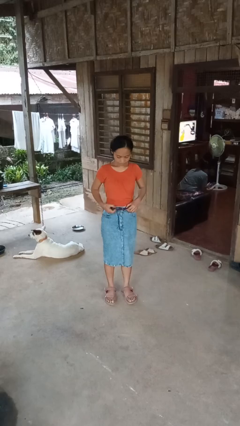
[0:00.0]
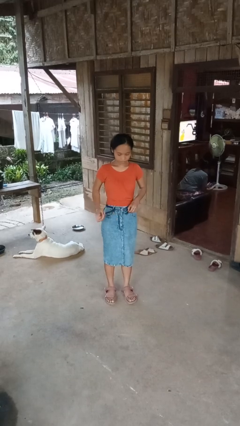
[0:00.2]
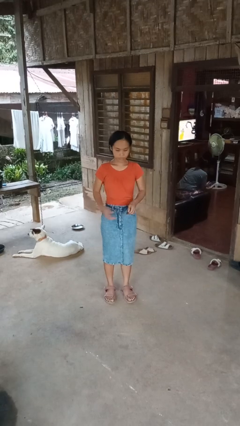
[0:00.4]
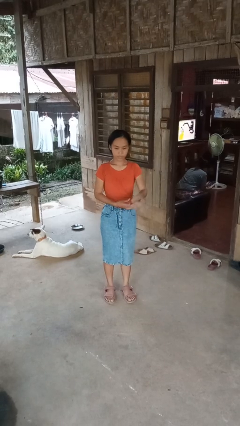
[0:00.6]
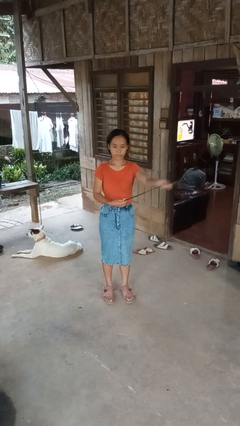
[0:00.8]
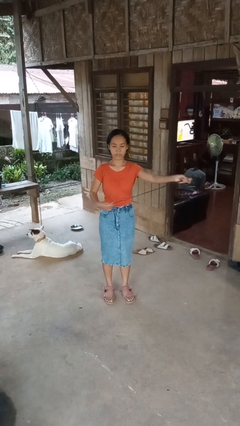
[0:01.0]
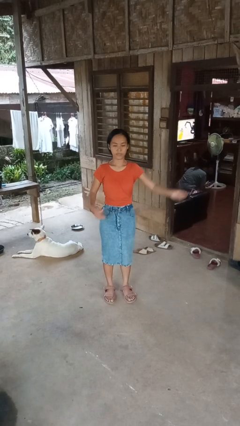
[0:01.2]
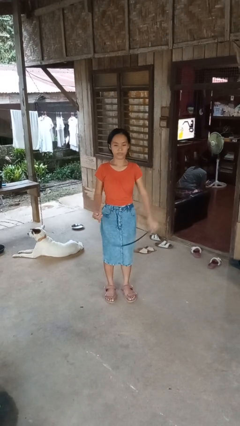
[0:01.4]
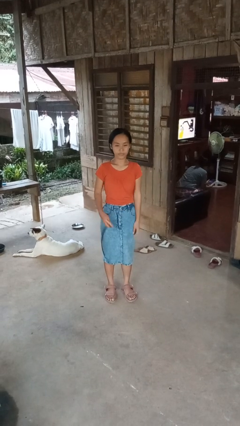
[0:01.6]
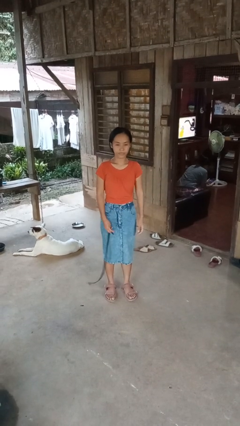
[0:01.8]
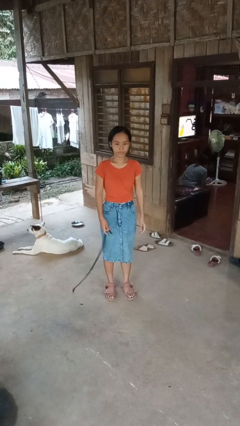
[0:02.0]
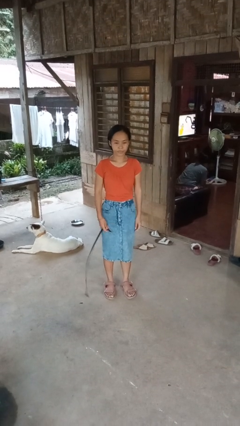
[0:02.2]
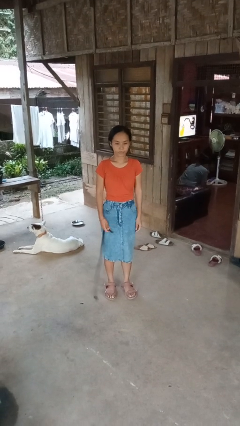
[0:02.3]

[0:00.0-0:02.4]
person takes off belt

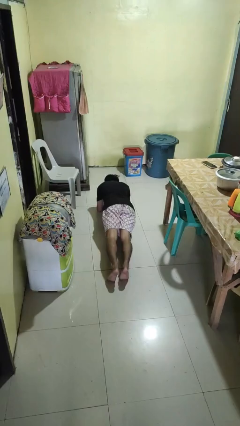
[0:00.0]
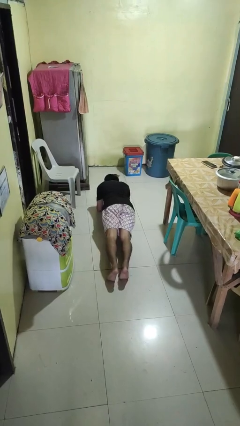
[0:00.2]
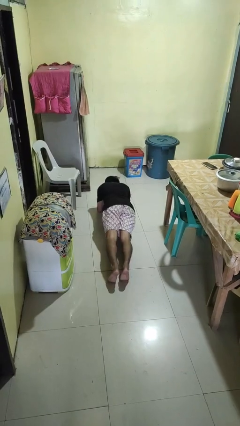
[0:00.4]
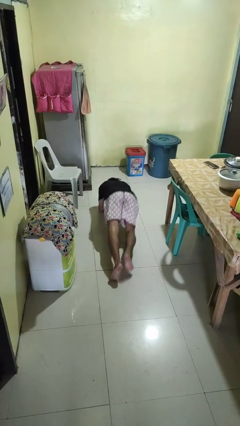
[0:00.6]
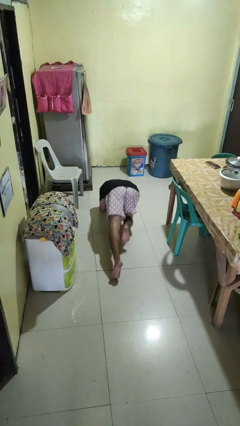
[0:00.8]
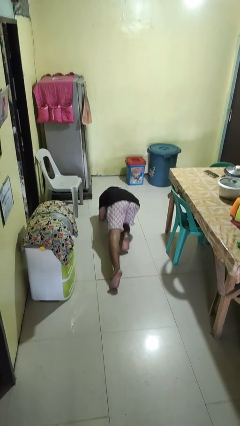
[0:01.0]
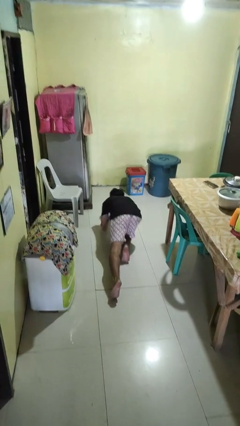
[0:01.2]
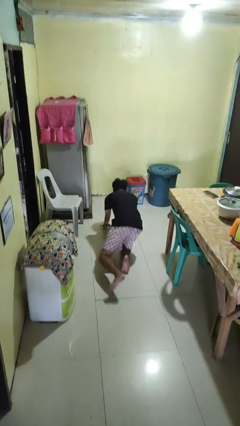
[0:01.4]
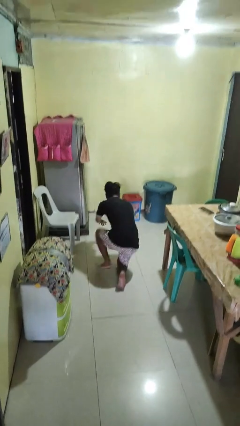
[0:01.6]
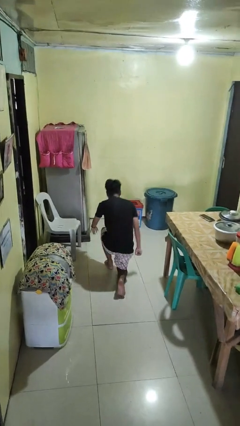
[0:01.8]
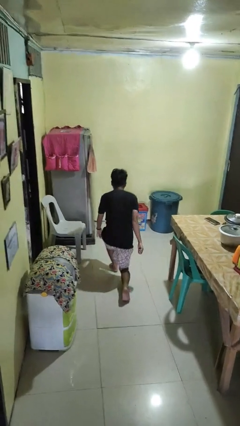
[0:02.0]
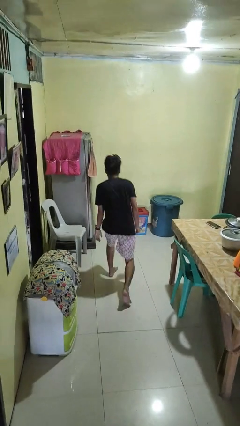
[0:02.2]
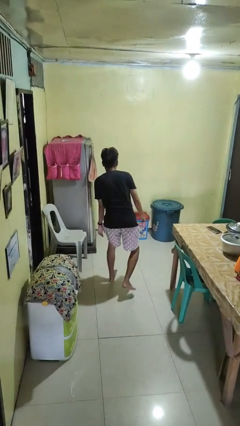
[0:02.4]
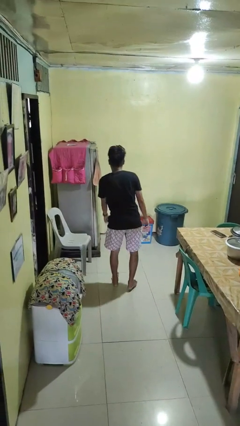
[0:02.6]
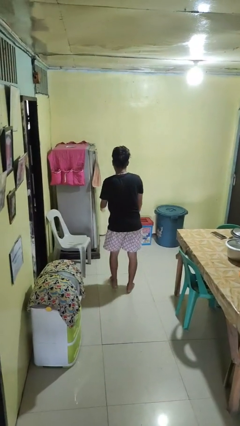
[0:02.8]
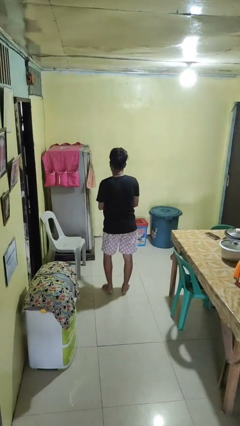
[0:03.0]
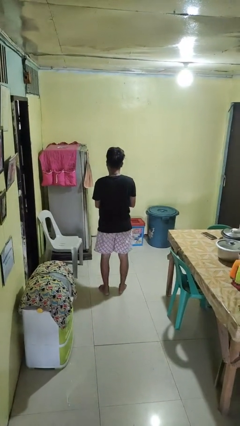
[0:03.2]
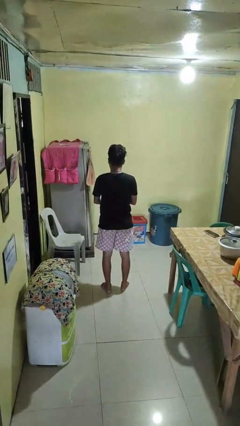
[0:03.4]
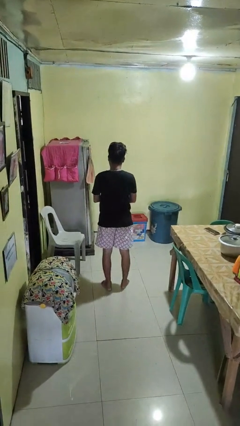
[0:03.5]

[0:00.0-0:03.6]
person stands up from floor

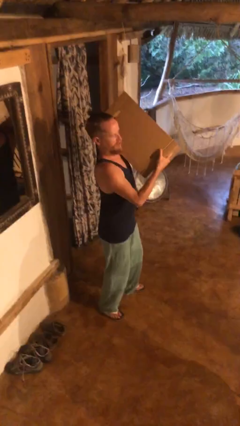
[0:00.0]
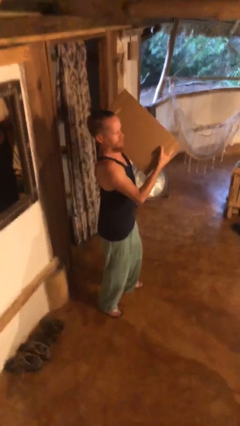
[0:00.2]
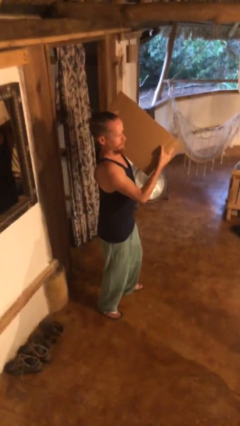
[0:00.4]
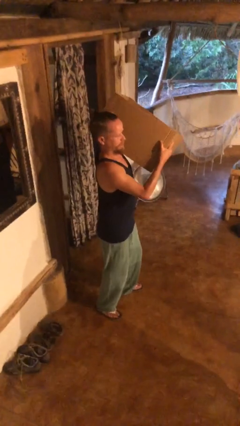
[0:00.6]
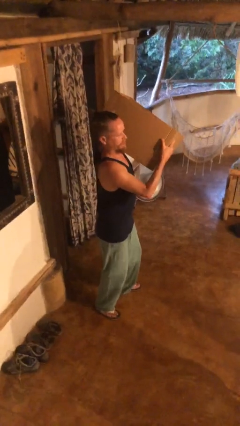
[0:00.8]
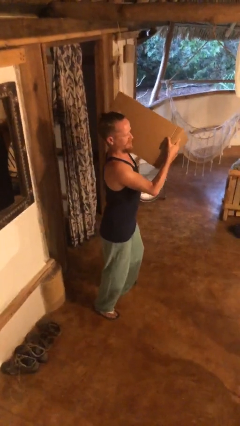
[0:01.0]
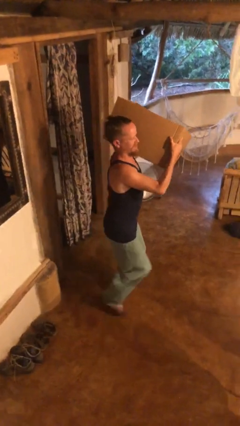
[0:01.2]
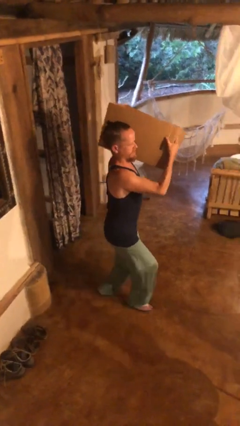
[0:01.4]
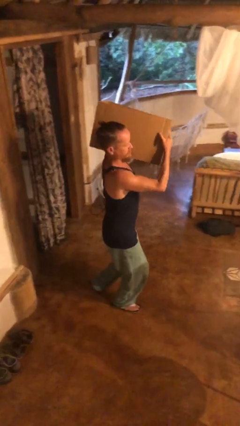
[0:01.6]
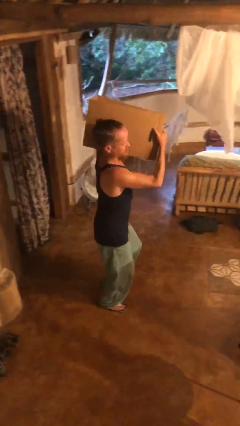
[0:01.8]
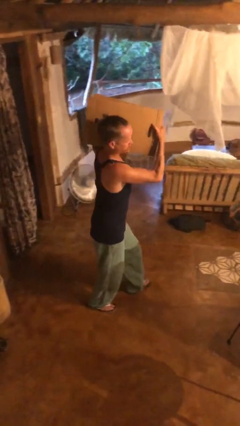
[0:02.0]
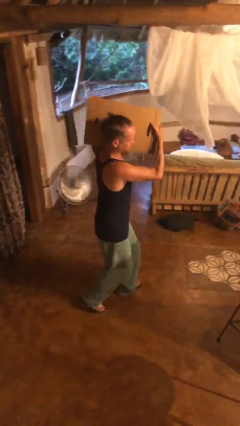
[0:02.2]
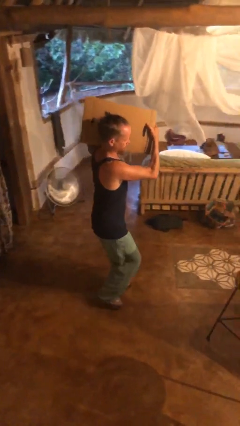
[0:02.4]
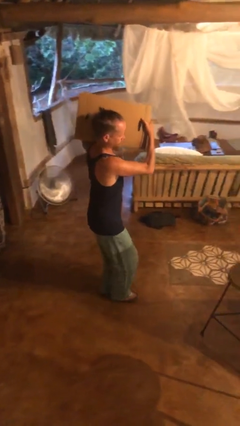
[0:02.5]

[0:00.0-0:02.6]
person carries heavy object

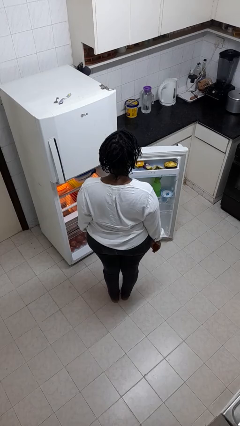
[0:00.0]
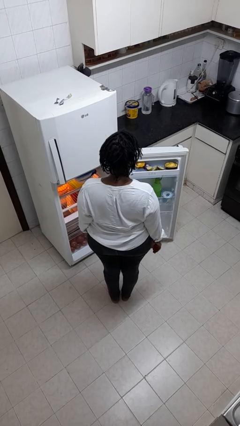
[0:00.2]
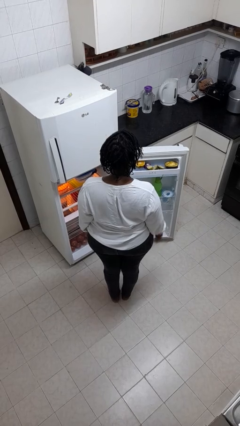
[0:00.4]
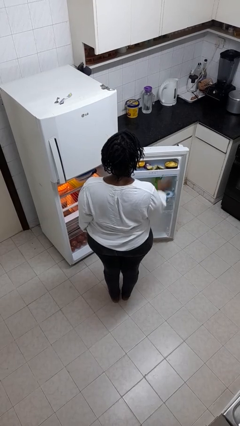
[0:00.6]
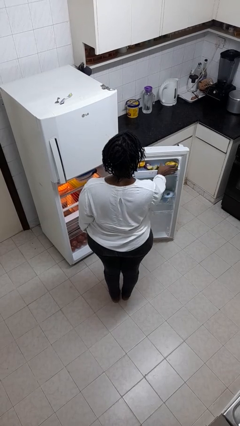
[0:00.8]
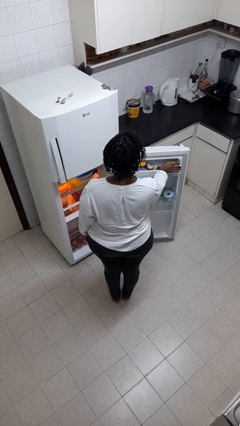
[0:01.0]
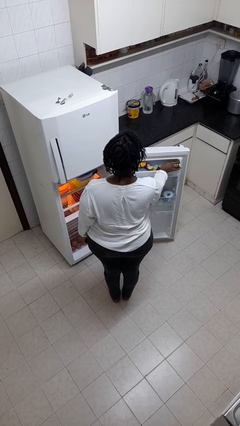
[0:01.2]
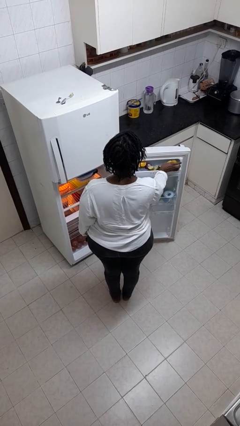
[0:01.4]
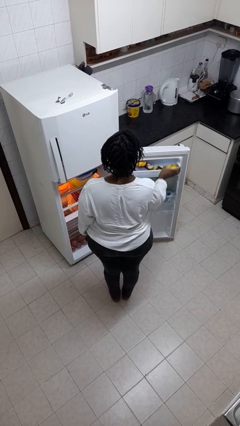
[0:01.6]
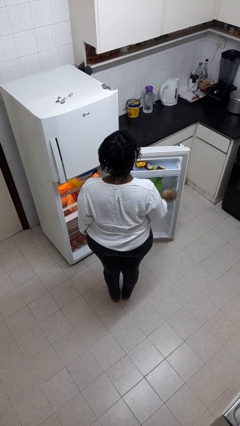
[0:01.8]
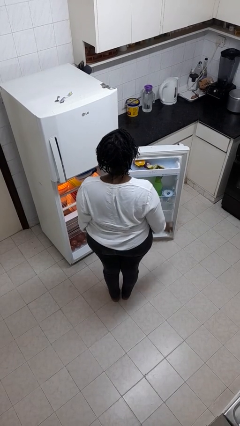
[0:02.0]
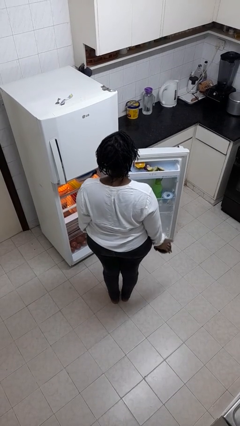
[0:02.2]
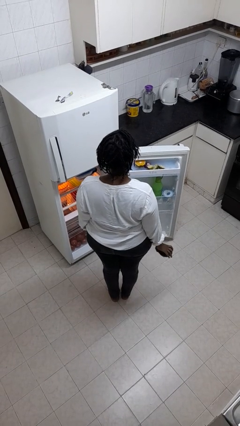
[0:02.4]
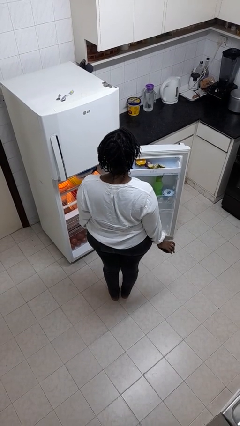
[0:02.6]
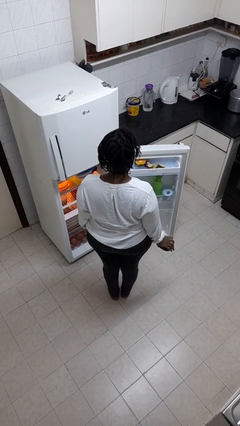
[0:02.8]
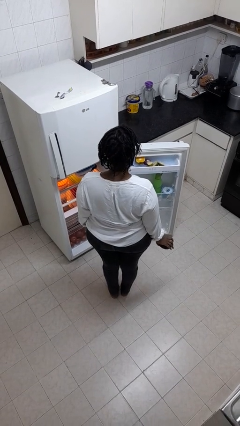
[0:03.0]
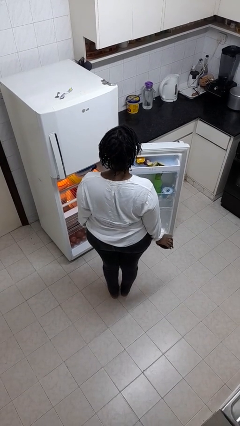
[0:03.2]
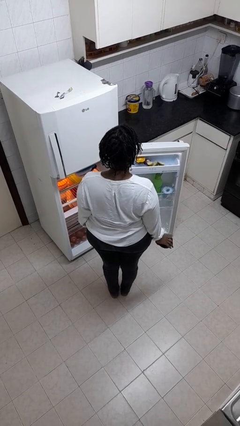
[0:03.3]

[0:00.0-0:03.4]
person takes object from refrigerator

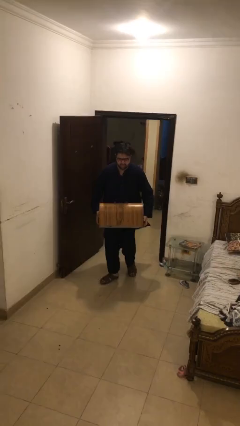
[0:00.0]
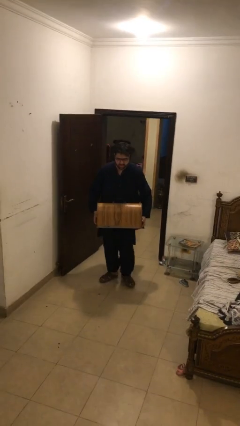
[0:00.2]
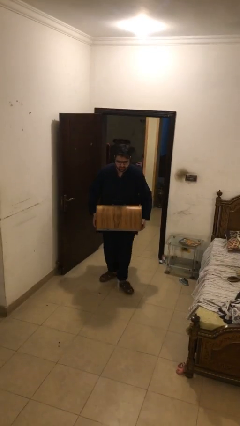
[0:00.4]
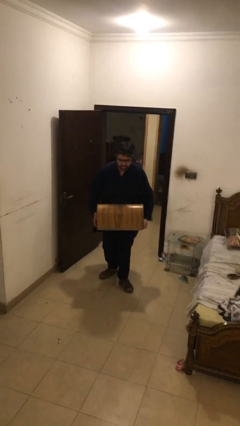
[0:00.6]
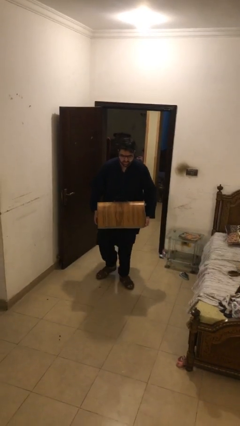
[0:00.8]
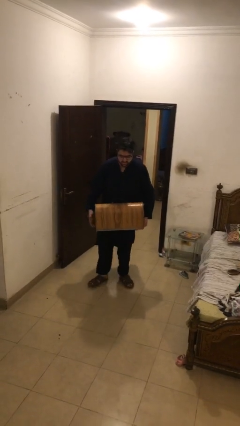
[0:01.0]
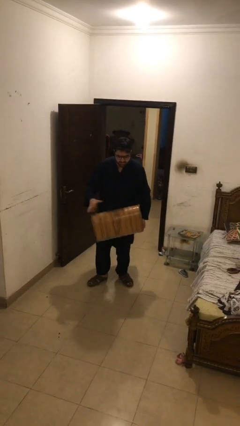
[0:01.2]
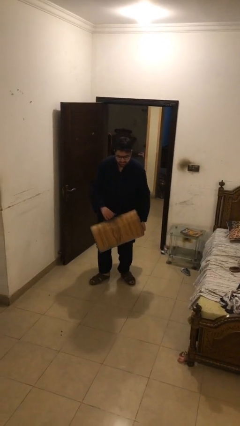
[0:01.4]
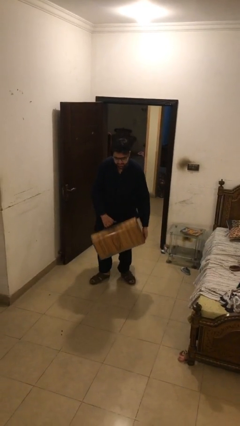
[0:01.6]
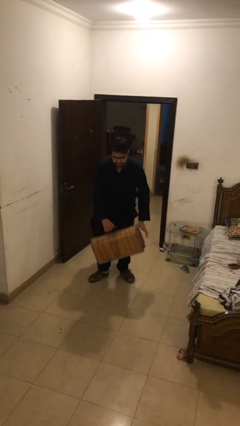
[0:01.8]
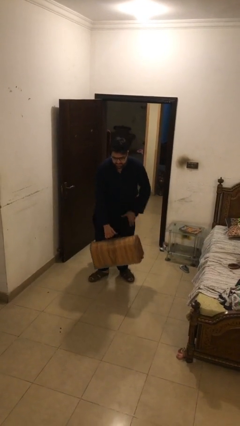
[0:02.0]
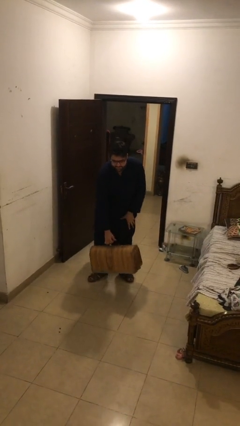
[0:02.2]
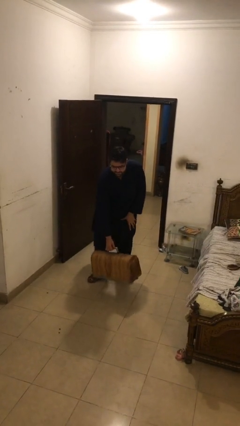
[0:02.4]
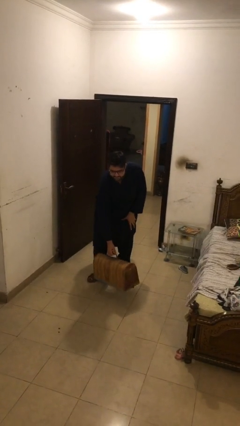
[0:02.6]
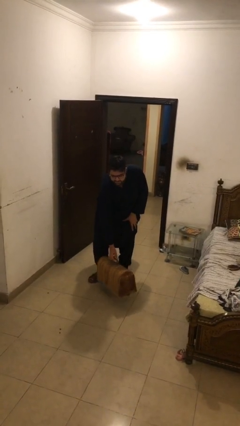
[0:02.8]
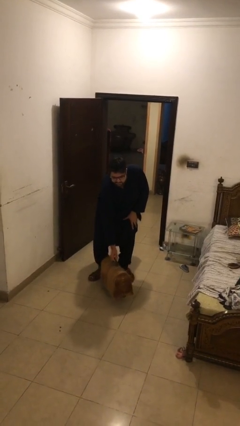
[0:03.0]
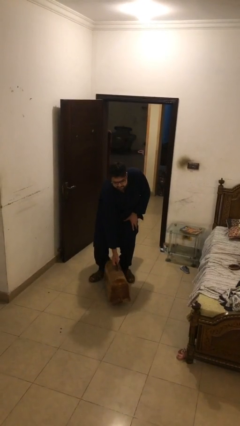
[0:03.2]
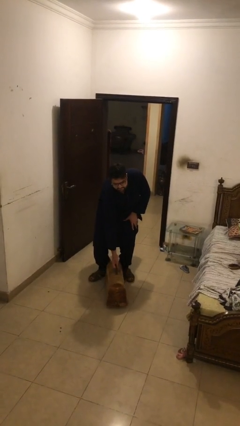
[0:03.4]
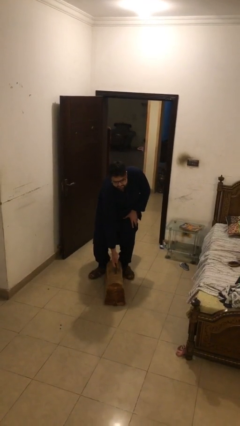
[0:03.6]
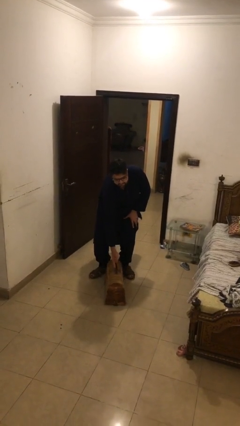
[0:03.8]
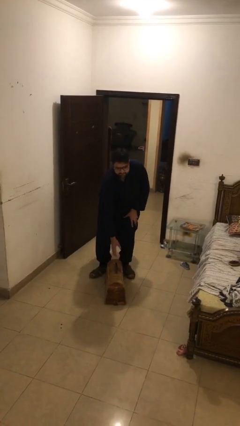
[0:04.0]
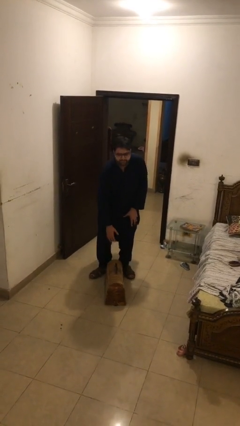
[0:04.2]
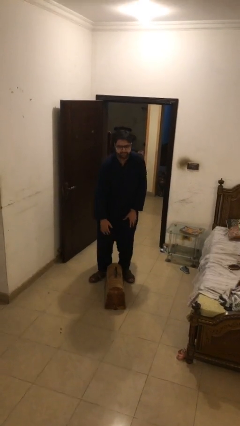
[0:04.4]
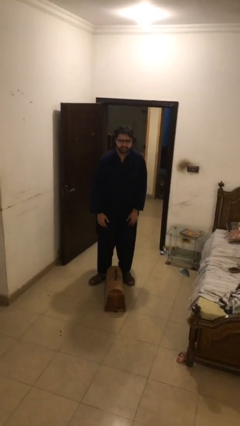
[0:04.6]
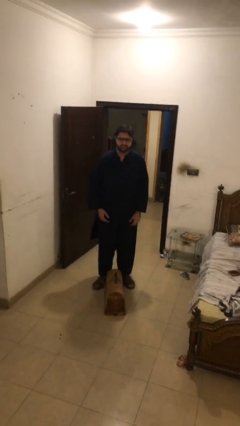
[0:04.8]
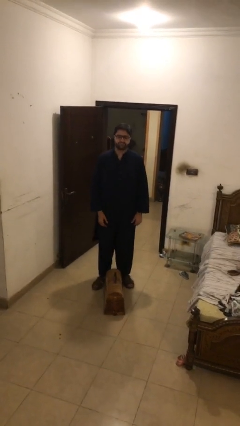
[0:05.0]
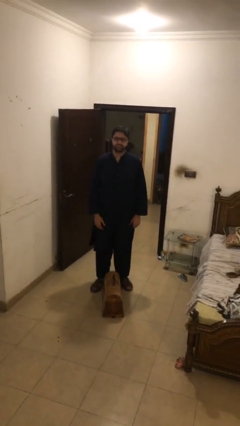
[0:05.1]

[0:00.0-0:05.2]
person puts down object on floor
